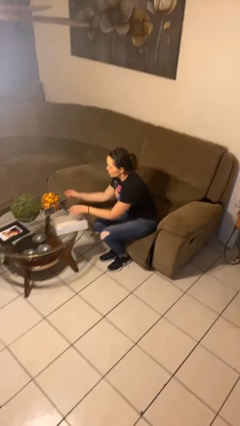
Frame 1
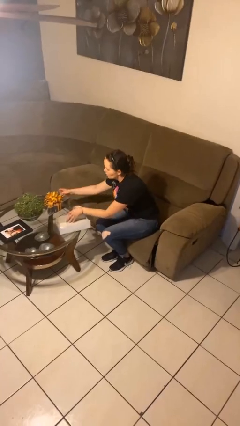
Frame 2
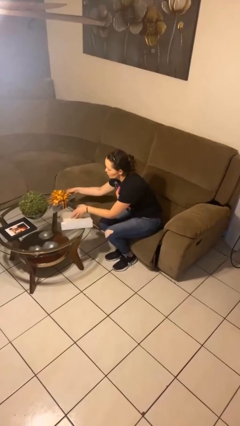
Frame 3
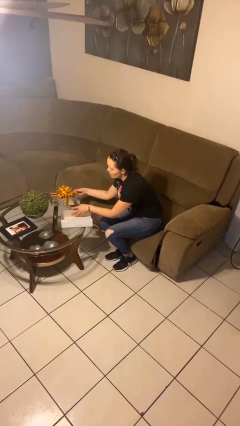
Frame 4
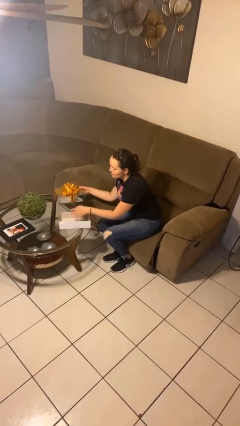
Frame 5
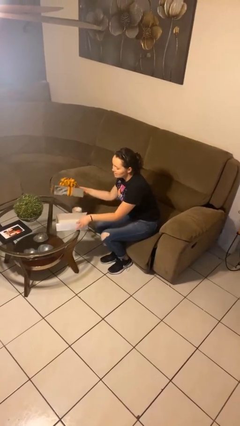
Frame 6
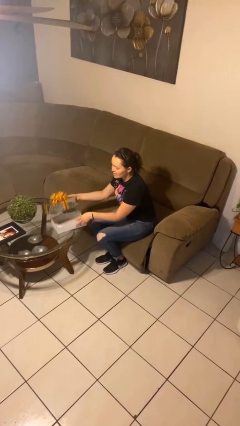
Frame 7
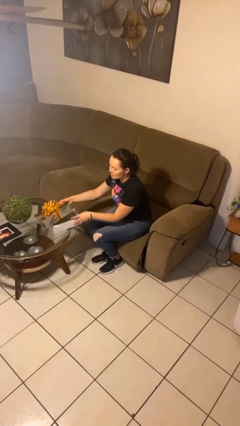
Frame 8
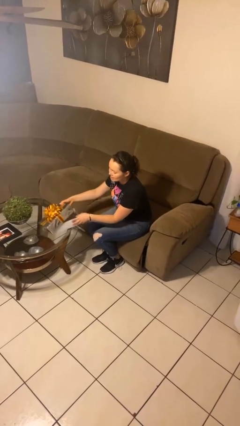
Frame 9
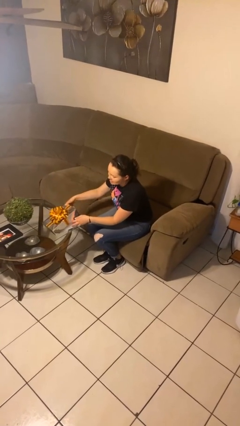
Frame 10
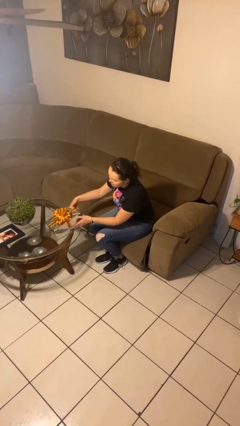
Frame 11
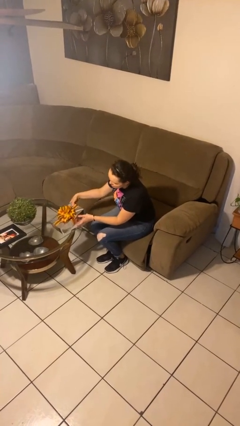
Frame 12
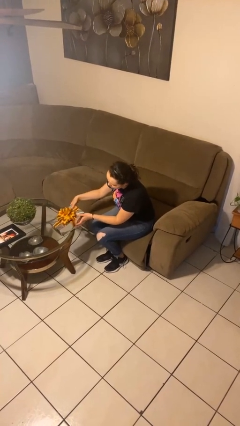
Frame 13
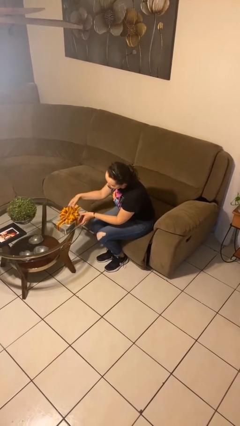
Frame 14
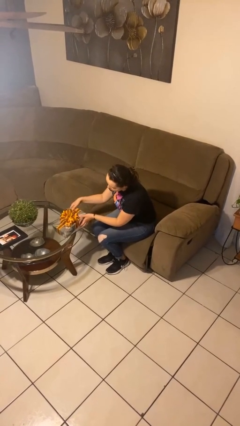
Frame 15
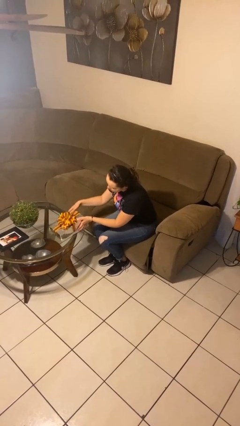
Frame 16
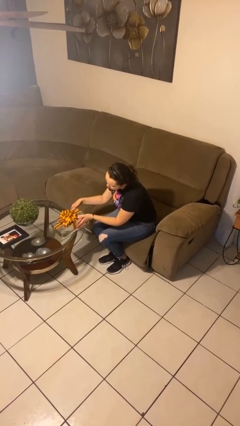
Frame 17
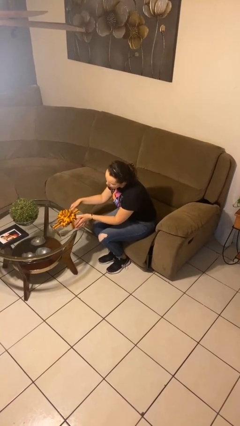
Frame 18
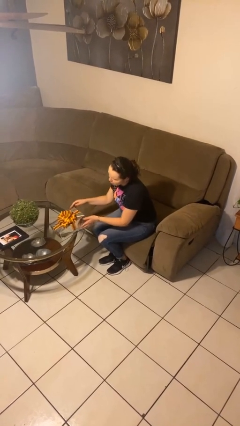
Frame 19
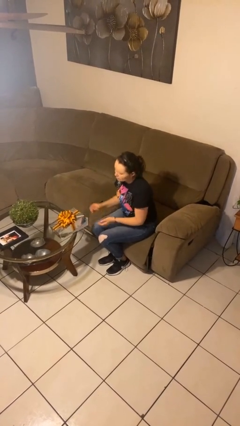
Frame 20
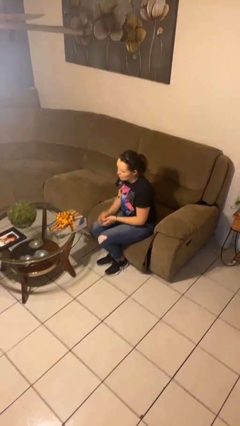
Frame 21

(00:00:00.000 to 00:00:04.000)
person wraps box

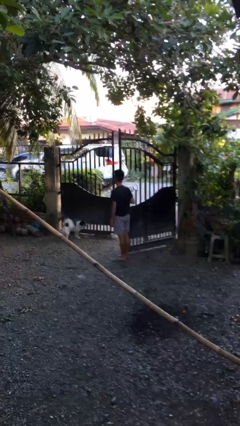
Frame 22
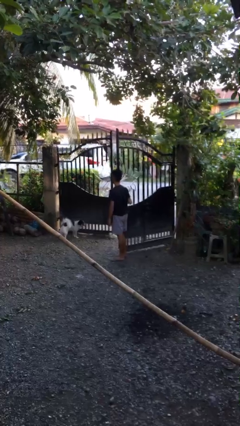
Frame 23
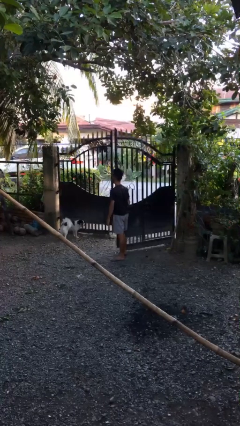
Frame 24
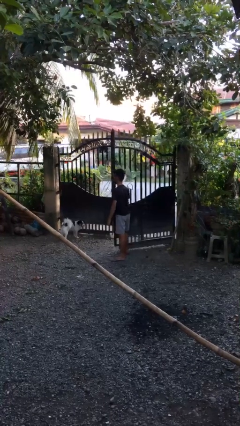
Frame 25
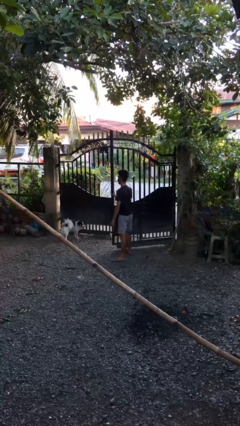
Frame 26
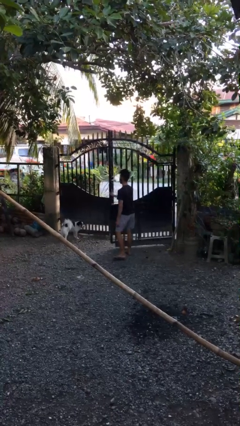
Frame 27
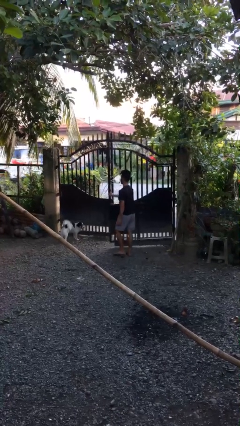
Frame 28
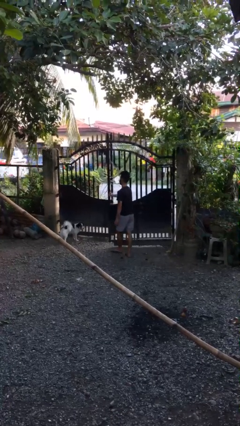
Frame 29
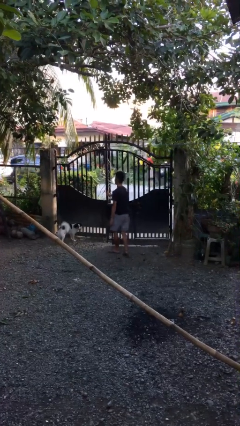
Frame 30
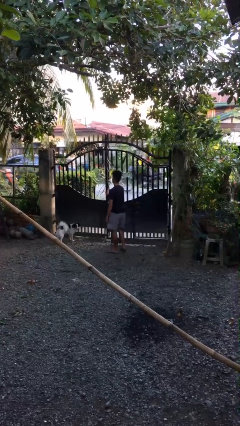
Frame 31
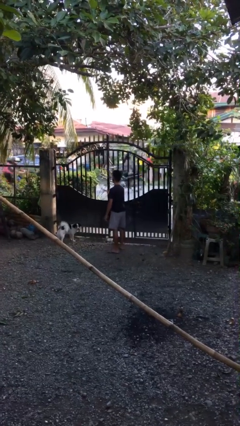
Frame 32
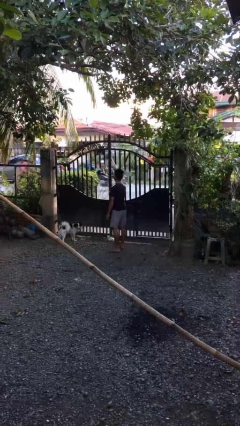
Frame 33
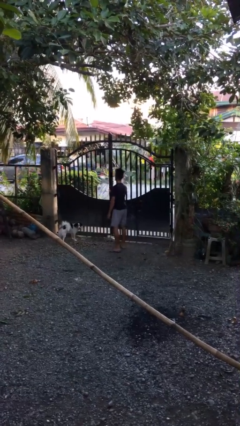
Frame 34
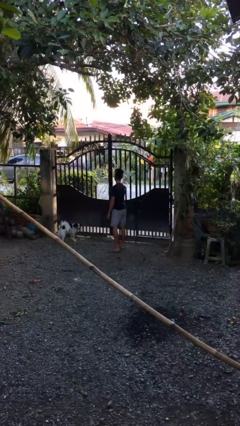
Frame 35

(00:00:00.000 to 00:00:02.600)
person closes gate

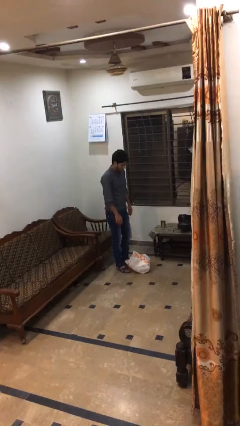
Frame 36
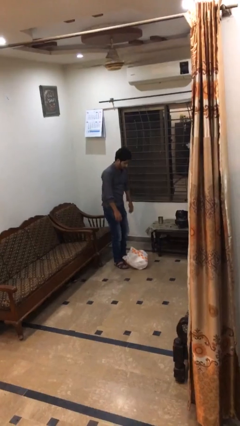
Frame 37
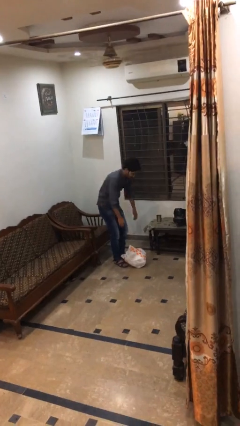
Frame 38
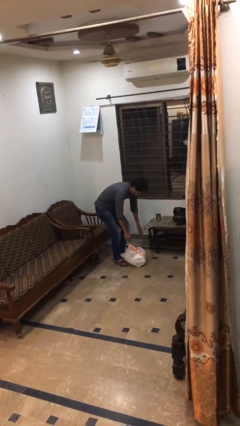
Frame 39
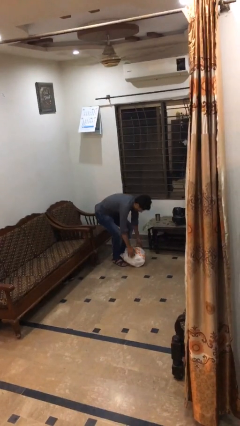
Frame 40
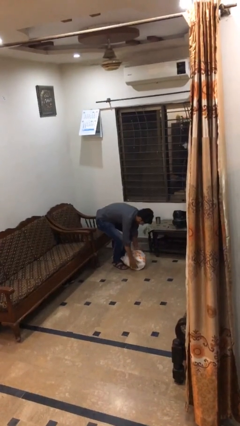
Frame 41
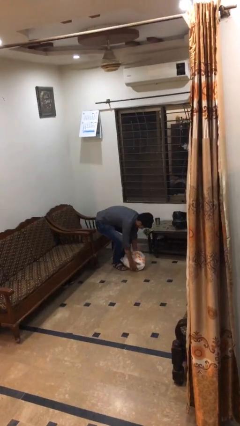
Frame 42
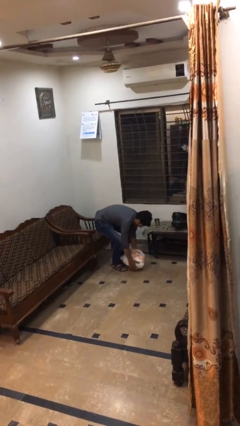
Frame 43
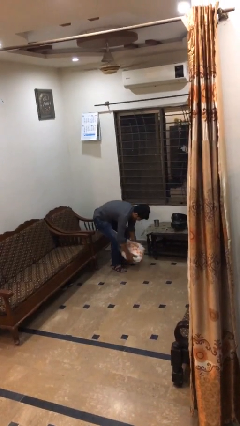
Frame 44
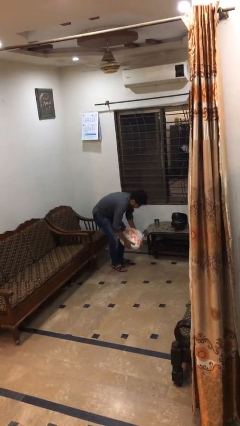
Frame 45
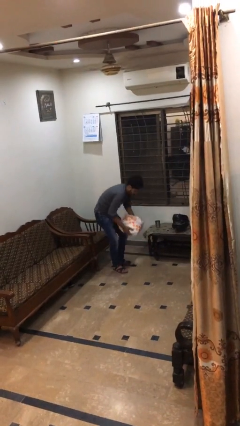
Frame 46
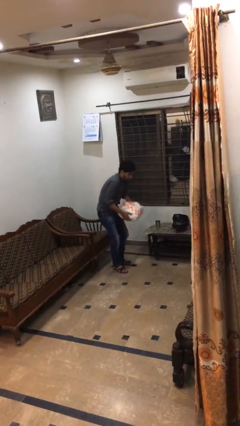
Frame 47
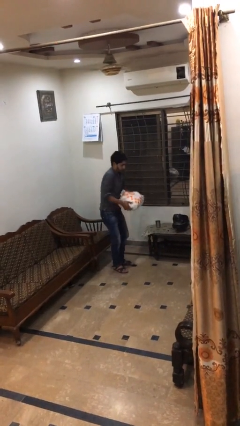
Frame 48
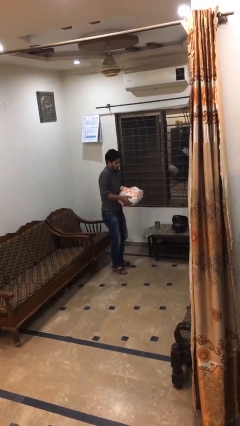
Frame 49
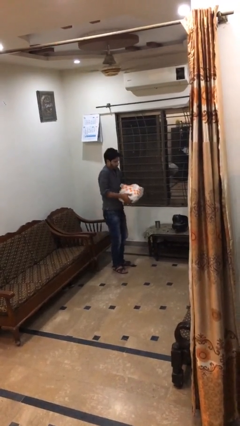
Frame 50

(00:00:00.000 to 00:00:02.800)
person picks up object from floor

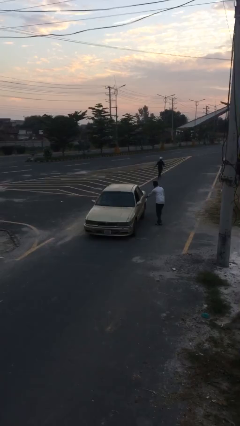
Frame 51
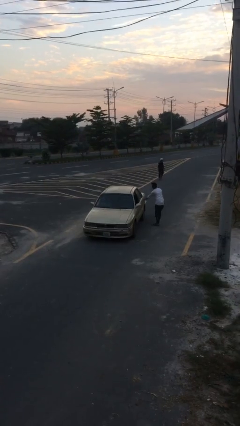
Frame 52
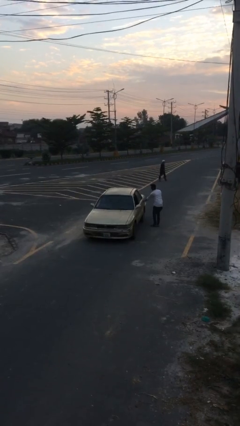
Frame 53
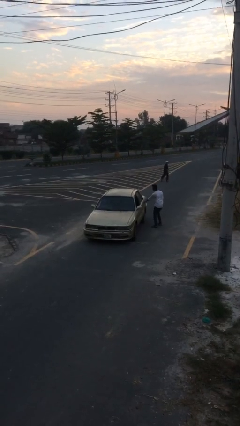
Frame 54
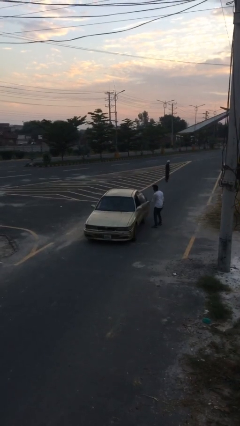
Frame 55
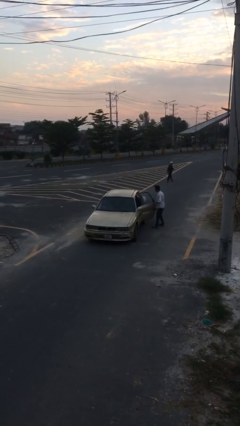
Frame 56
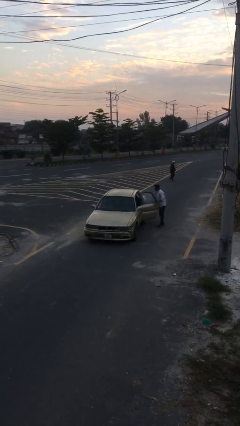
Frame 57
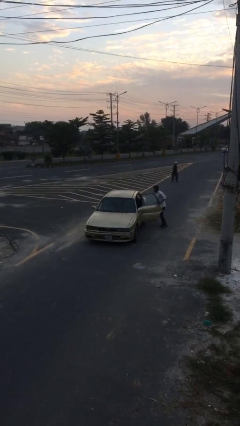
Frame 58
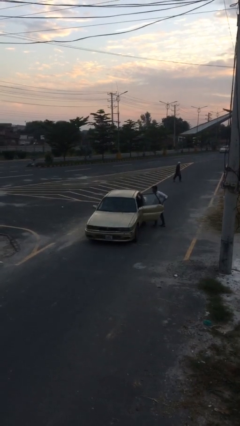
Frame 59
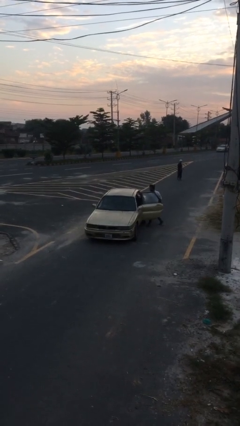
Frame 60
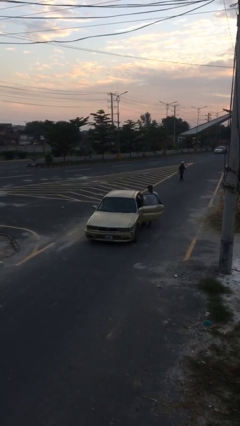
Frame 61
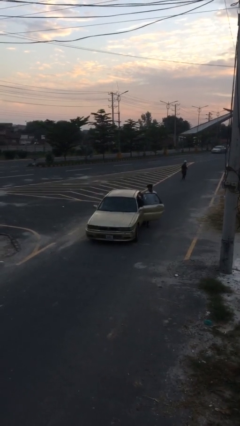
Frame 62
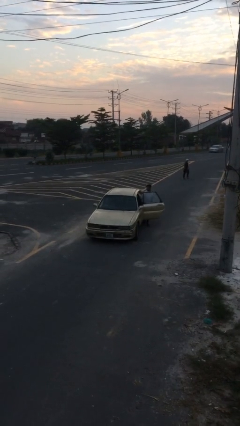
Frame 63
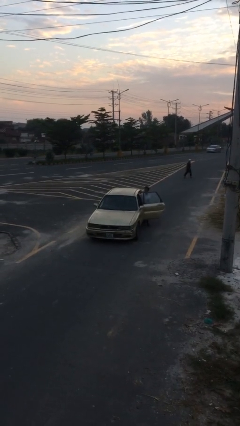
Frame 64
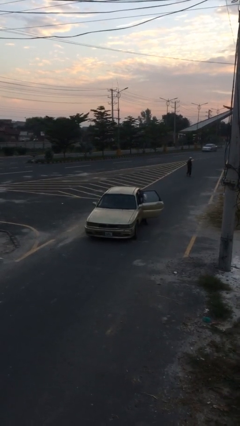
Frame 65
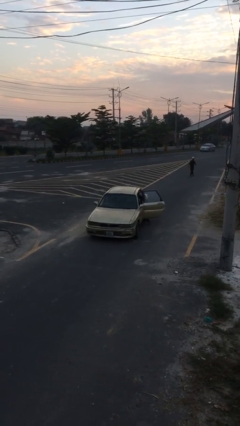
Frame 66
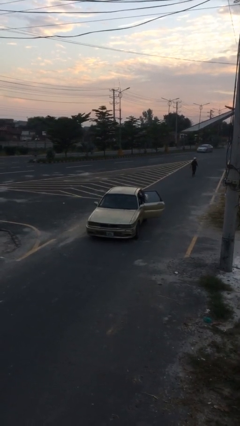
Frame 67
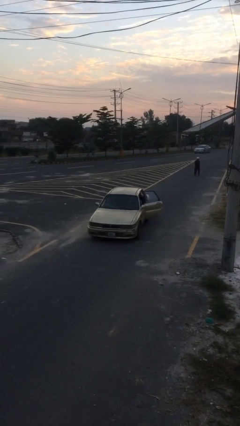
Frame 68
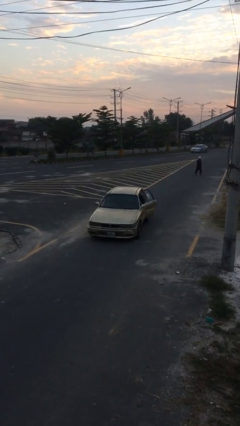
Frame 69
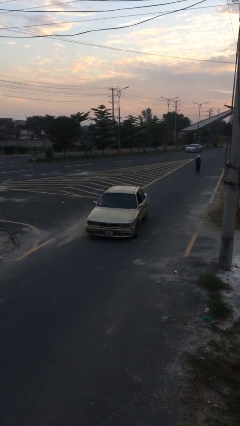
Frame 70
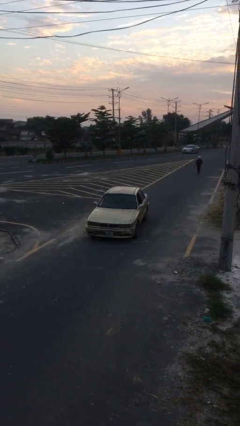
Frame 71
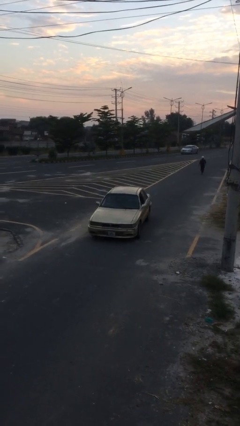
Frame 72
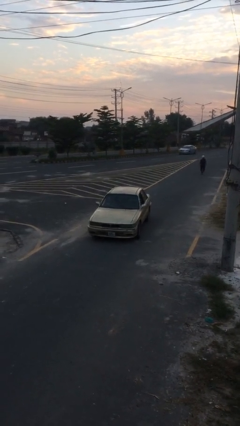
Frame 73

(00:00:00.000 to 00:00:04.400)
car picks up person

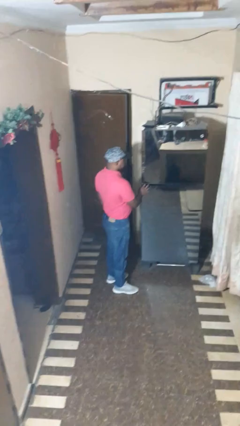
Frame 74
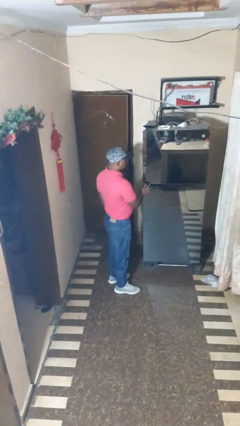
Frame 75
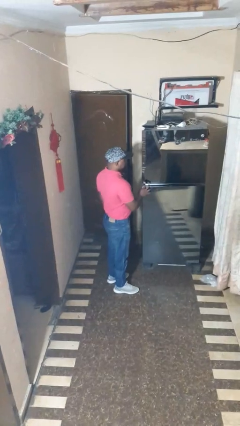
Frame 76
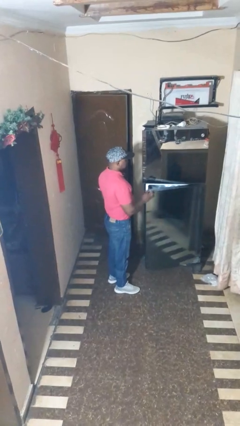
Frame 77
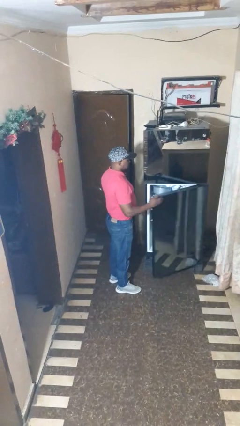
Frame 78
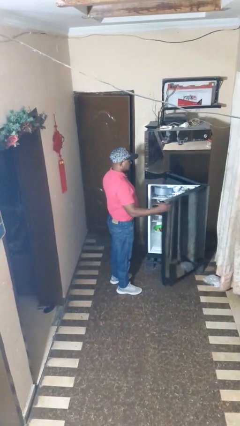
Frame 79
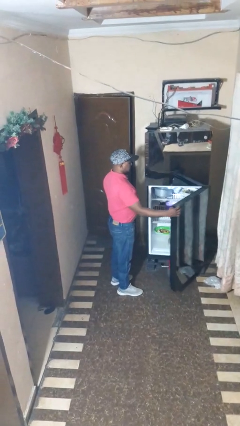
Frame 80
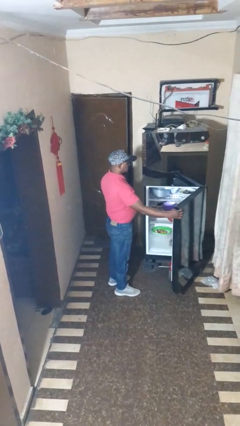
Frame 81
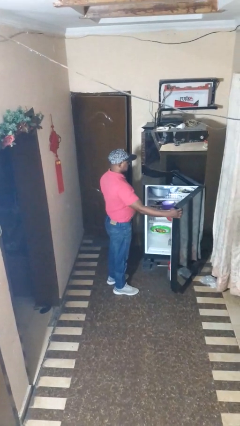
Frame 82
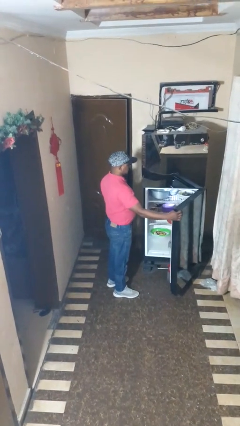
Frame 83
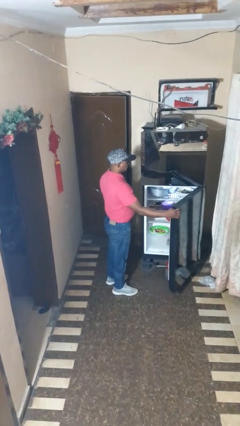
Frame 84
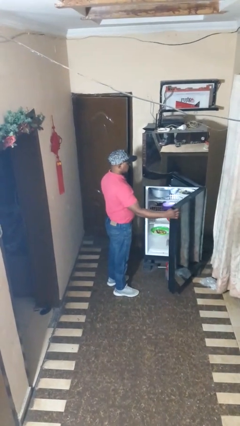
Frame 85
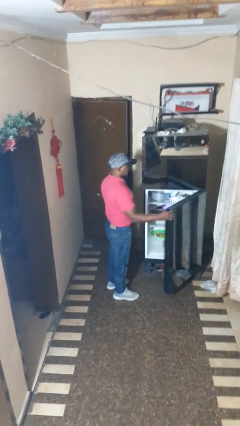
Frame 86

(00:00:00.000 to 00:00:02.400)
person opens refrigerator

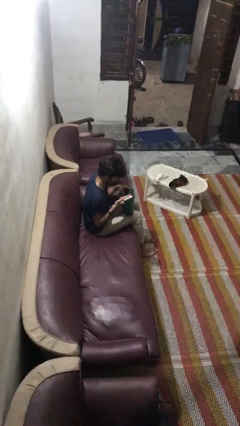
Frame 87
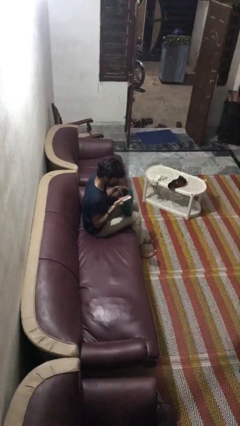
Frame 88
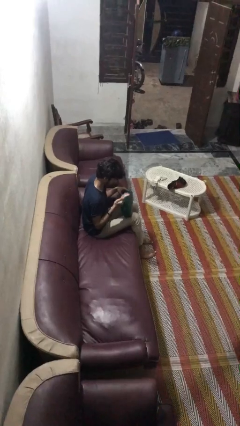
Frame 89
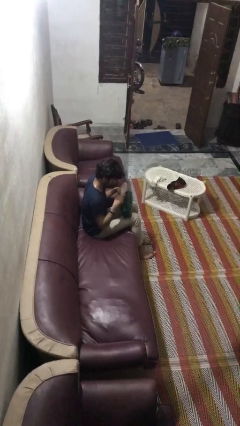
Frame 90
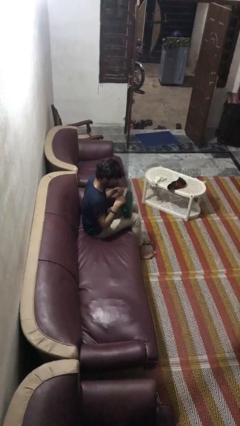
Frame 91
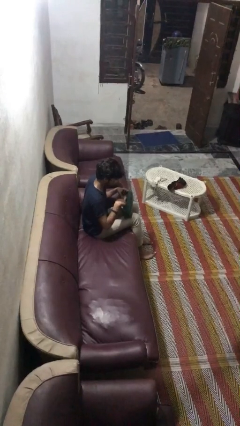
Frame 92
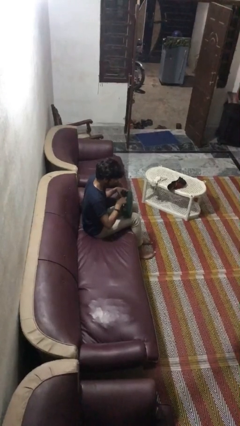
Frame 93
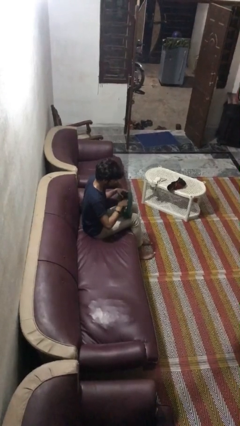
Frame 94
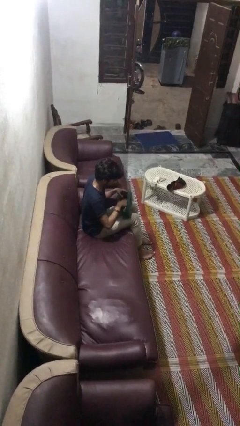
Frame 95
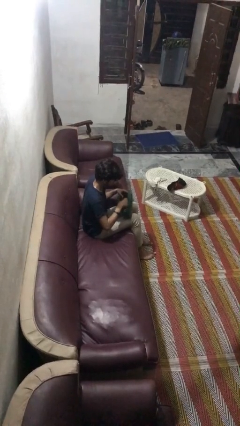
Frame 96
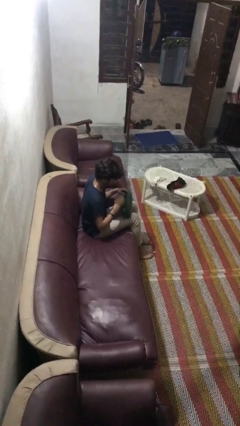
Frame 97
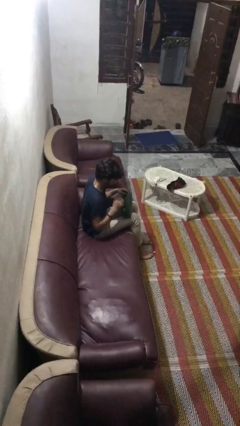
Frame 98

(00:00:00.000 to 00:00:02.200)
person puts object into purse
